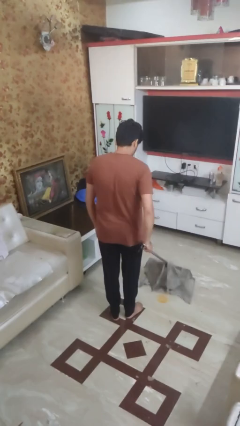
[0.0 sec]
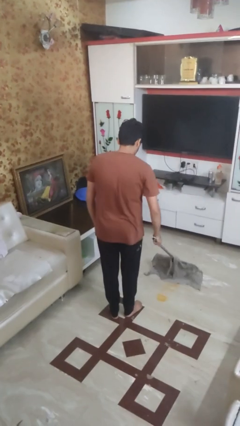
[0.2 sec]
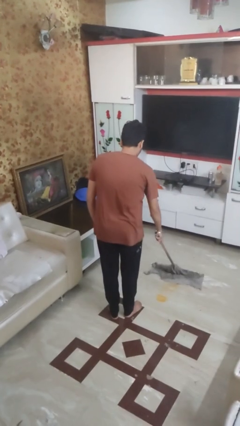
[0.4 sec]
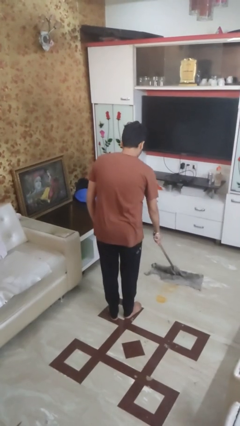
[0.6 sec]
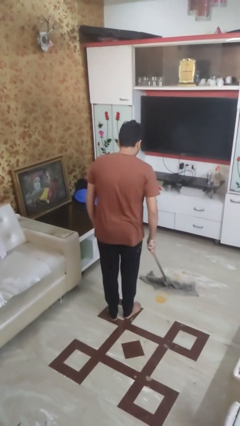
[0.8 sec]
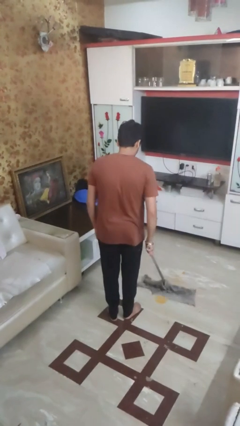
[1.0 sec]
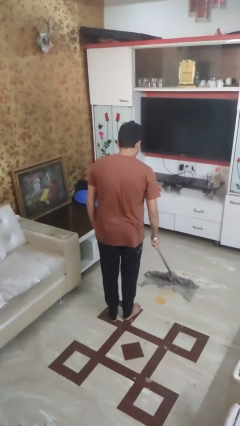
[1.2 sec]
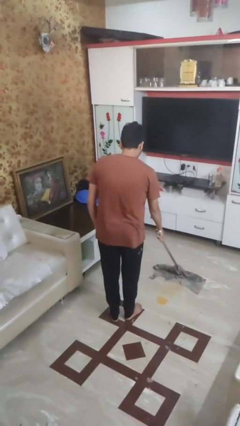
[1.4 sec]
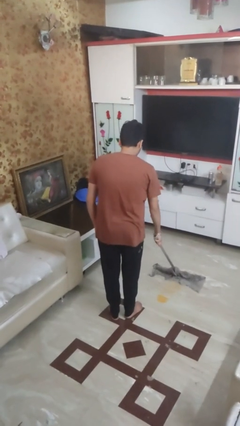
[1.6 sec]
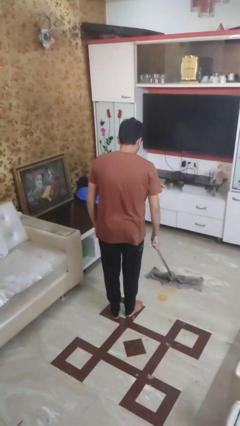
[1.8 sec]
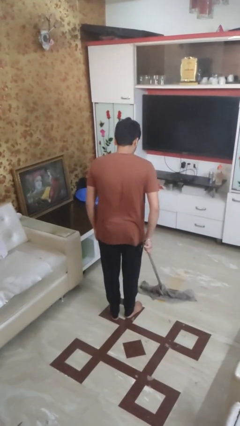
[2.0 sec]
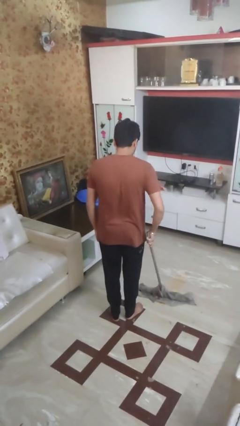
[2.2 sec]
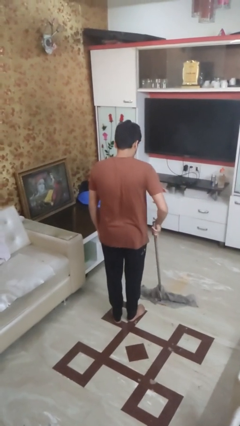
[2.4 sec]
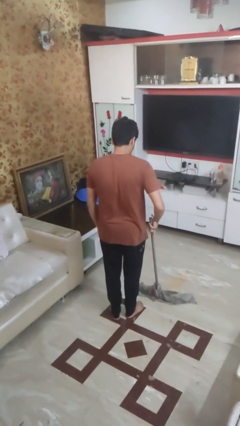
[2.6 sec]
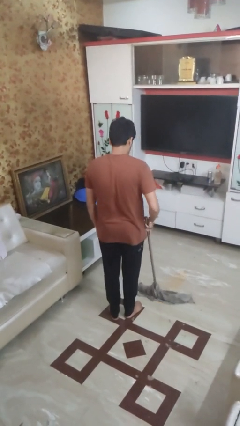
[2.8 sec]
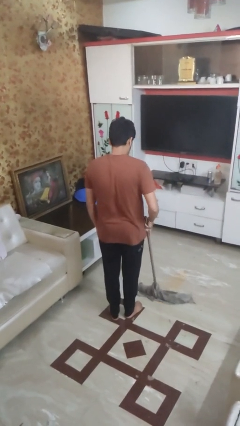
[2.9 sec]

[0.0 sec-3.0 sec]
person mops

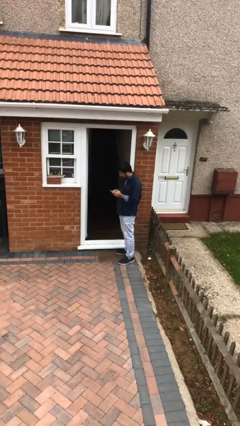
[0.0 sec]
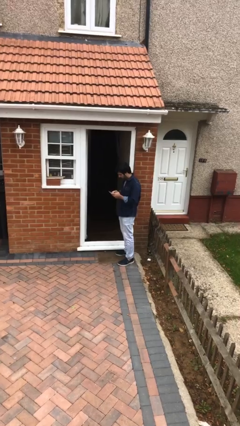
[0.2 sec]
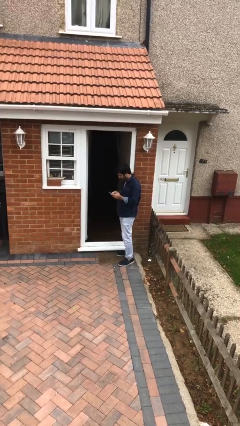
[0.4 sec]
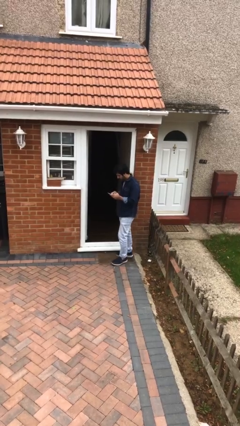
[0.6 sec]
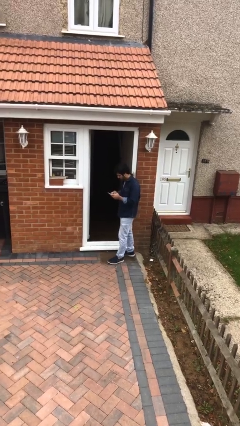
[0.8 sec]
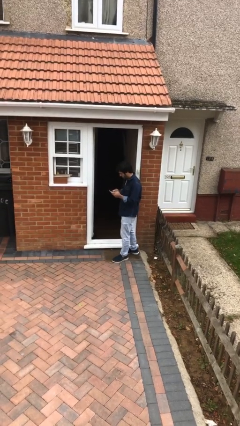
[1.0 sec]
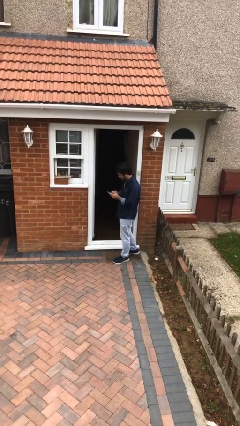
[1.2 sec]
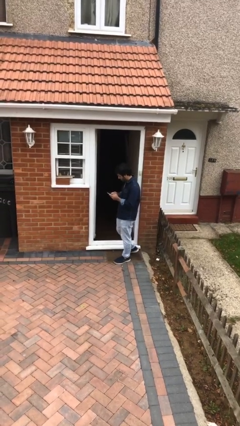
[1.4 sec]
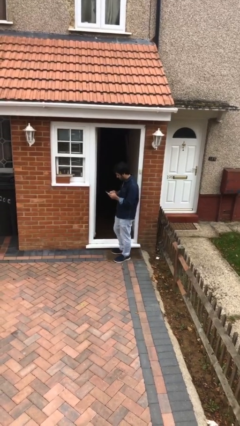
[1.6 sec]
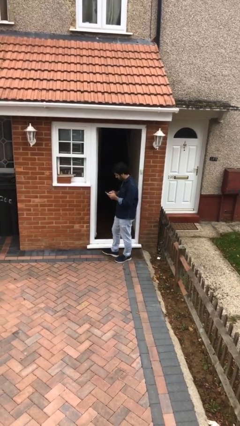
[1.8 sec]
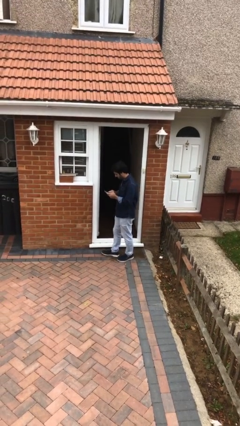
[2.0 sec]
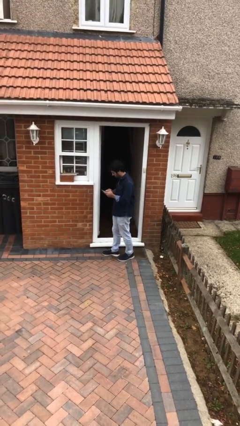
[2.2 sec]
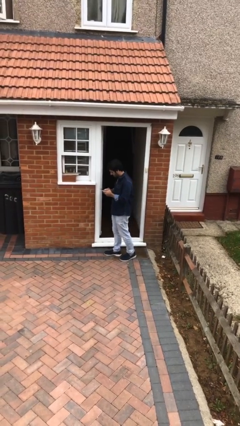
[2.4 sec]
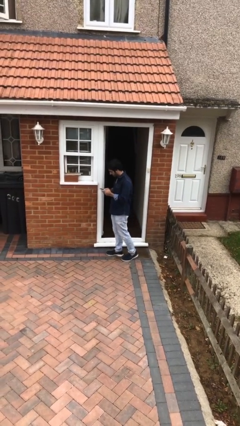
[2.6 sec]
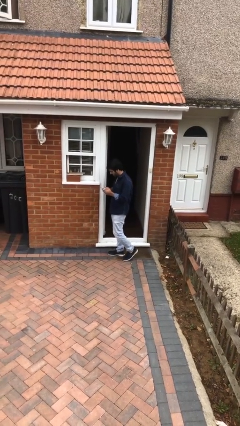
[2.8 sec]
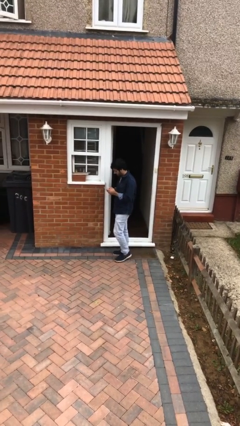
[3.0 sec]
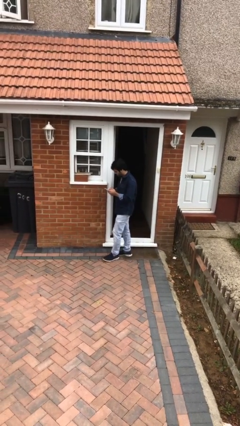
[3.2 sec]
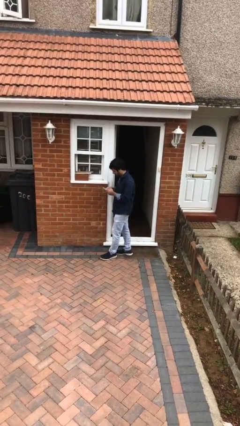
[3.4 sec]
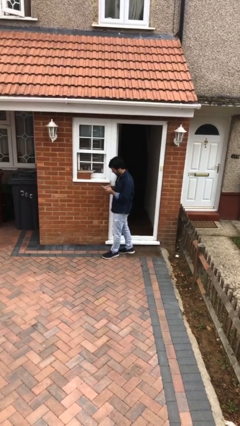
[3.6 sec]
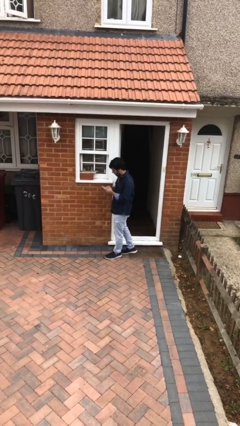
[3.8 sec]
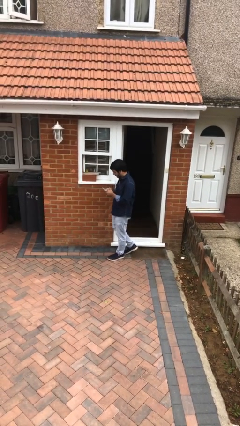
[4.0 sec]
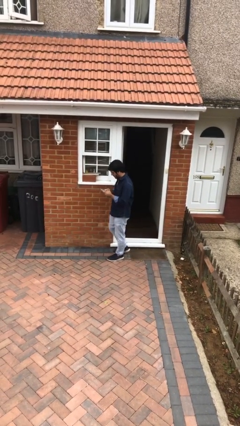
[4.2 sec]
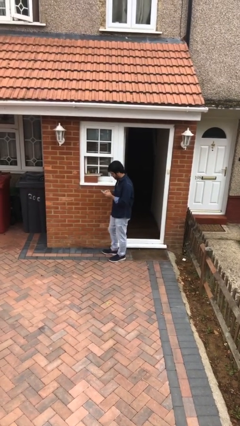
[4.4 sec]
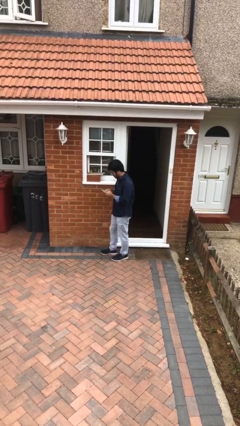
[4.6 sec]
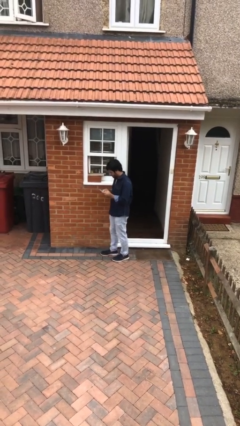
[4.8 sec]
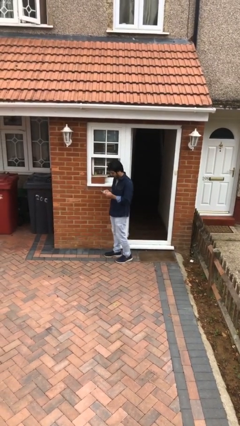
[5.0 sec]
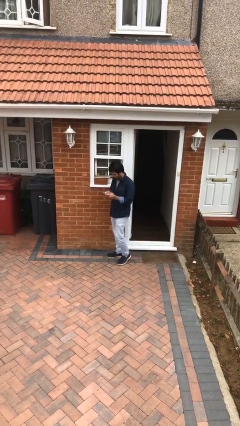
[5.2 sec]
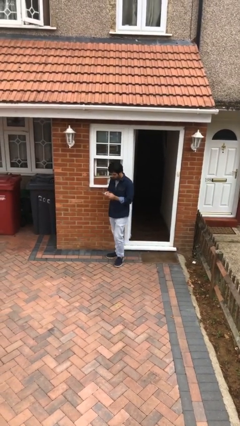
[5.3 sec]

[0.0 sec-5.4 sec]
person texts on phone

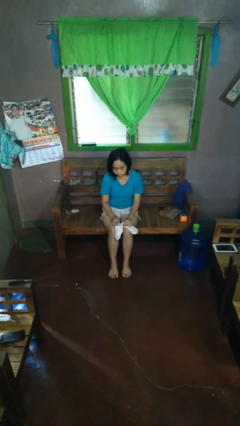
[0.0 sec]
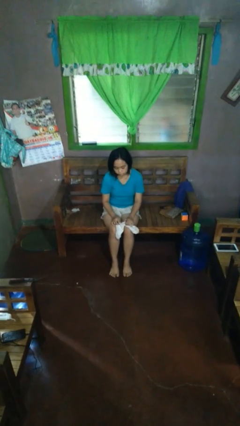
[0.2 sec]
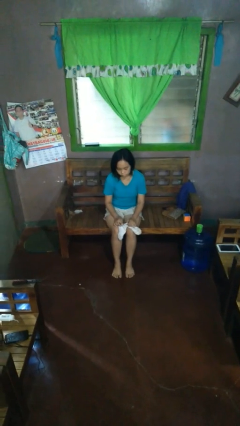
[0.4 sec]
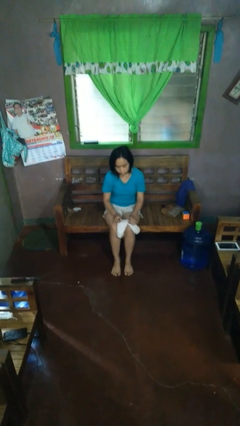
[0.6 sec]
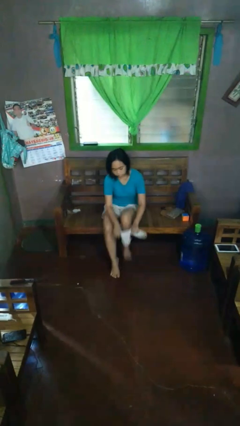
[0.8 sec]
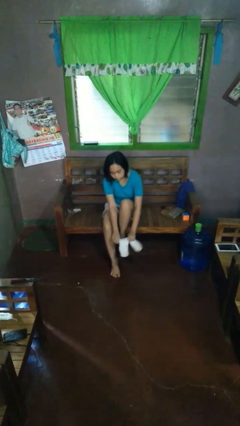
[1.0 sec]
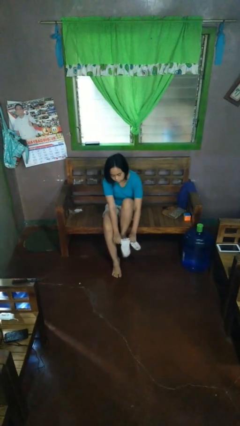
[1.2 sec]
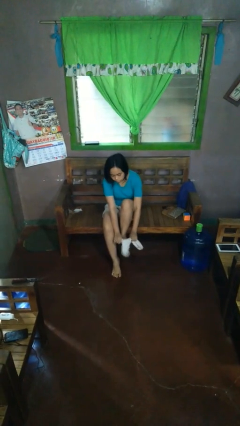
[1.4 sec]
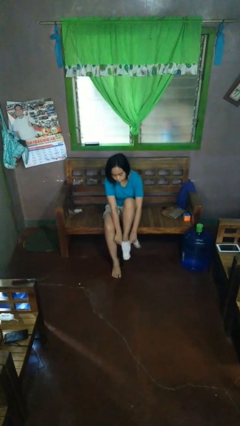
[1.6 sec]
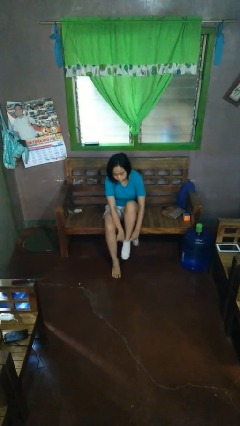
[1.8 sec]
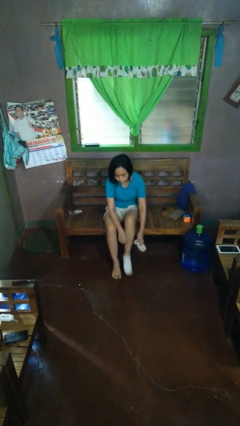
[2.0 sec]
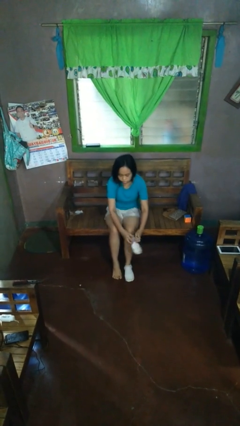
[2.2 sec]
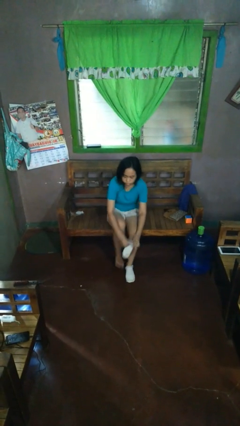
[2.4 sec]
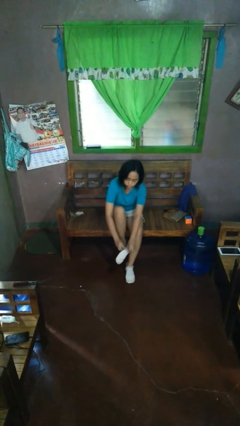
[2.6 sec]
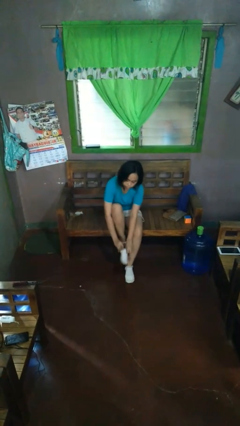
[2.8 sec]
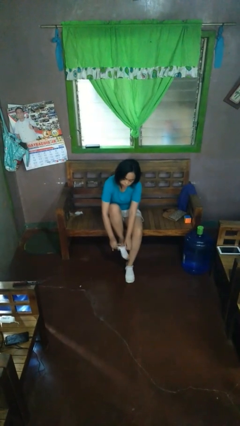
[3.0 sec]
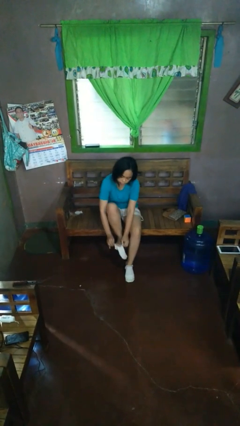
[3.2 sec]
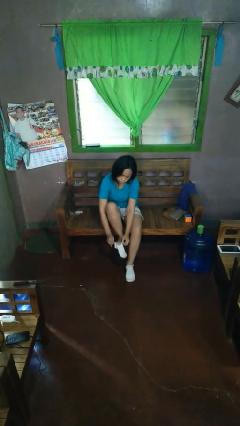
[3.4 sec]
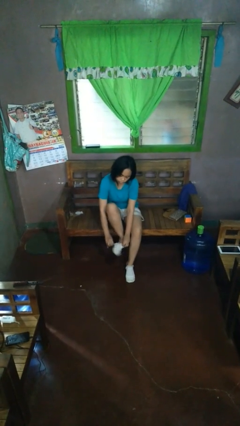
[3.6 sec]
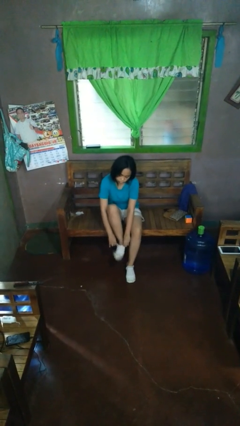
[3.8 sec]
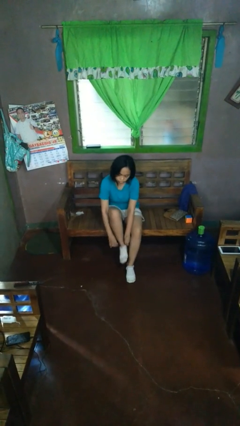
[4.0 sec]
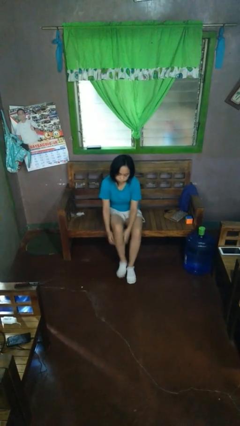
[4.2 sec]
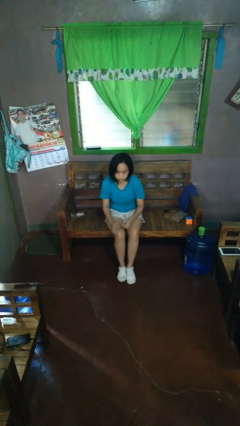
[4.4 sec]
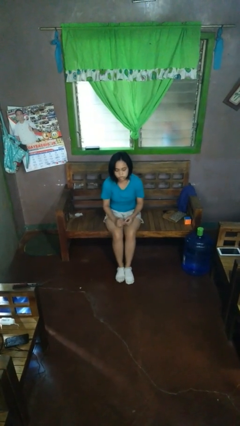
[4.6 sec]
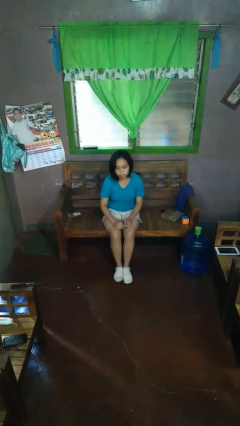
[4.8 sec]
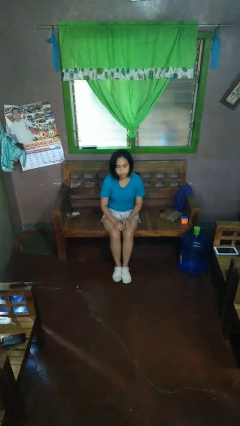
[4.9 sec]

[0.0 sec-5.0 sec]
person puts on socks

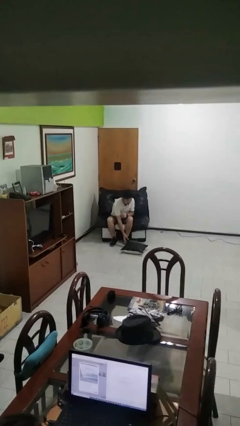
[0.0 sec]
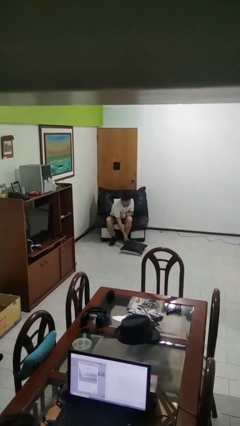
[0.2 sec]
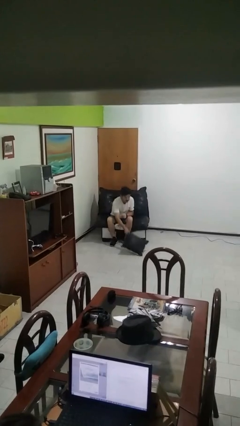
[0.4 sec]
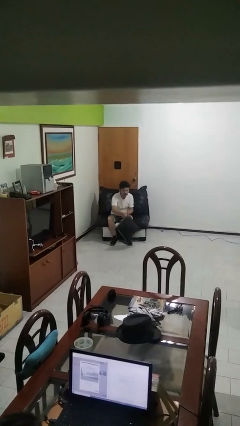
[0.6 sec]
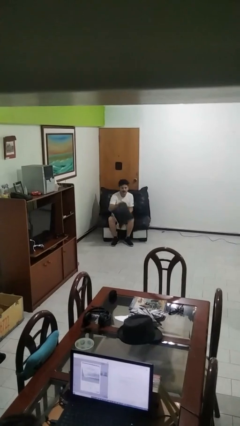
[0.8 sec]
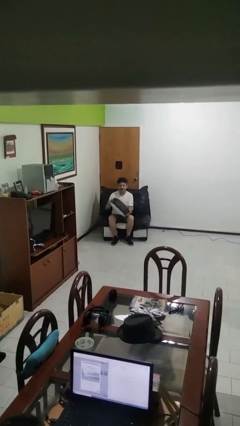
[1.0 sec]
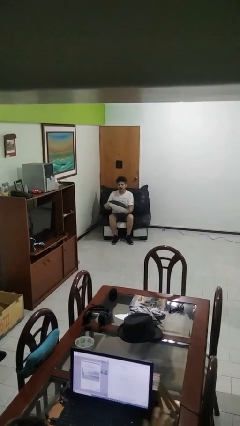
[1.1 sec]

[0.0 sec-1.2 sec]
person picks up object from floor

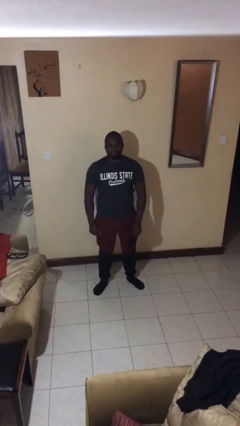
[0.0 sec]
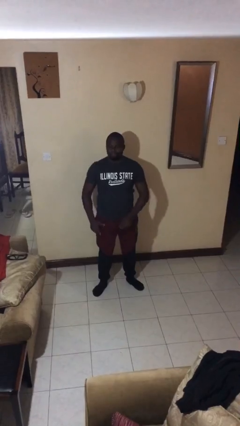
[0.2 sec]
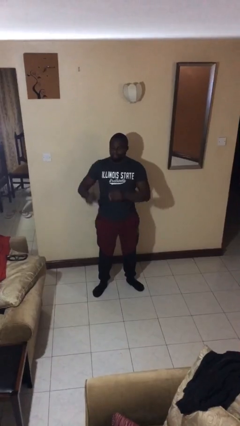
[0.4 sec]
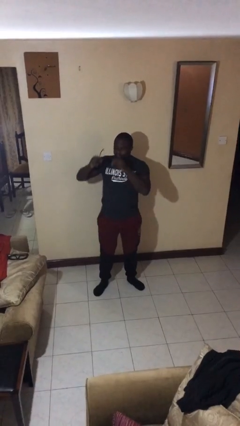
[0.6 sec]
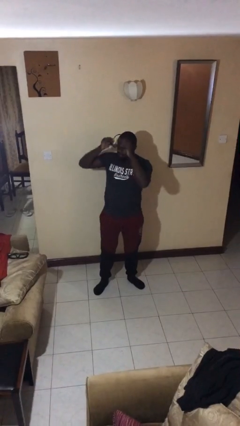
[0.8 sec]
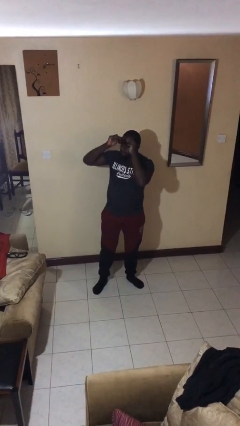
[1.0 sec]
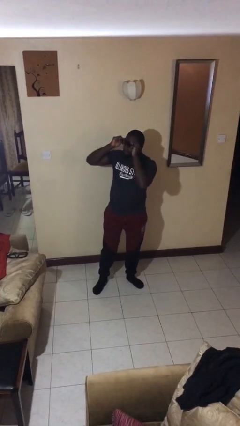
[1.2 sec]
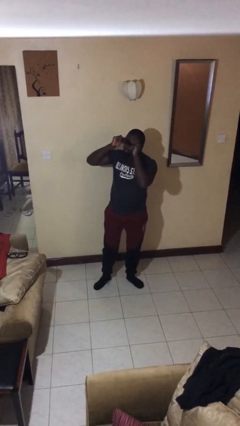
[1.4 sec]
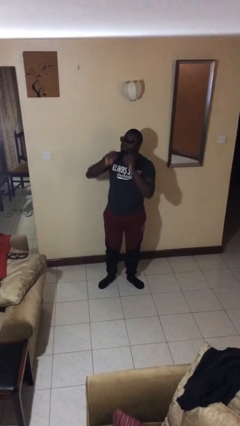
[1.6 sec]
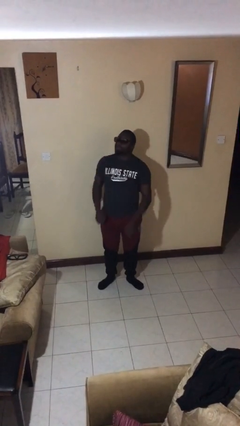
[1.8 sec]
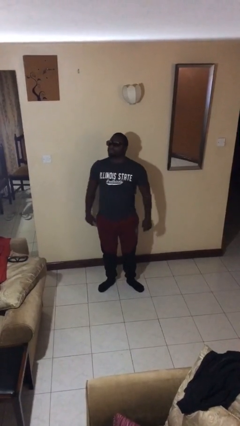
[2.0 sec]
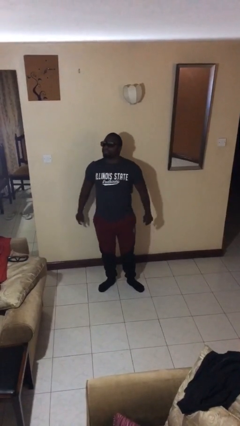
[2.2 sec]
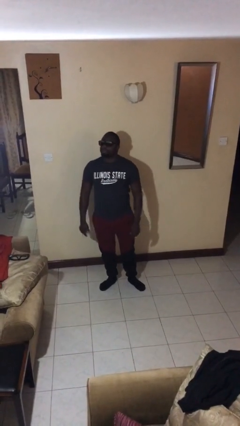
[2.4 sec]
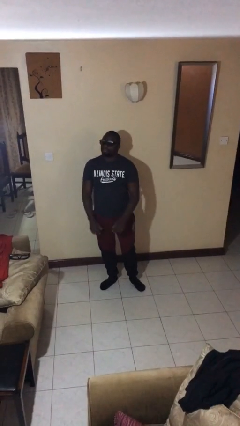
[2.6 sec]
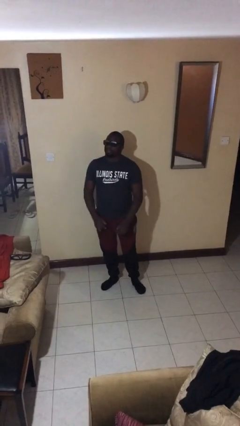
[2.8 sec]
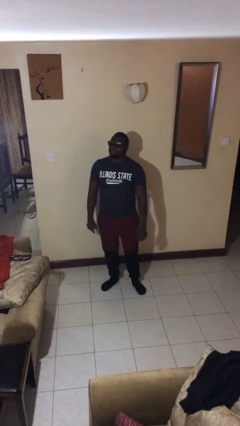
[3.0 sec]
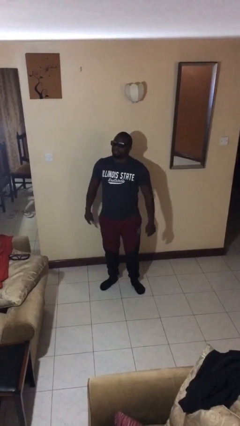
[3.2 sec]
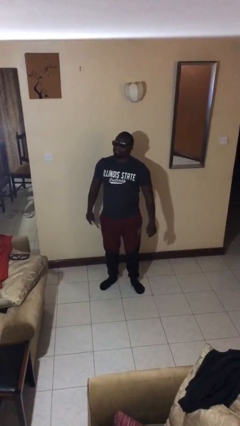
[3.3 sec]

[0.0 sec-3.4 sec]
person puts on sunglasses
